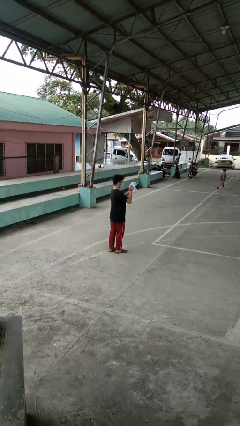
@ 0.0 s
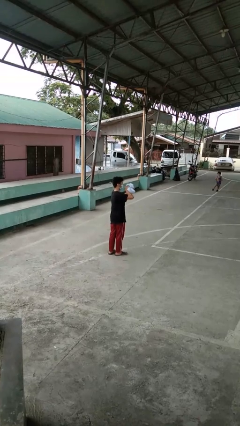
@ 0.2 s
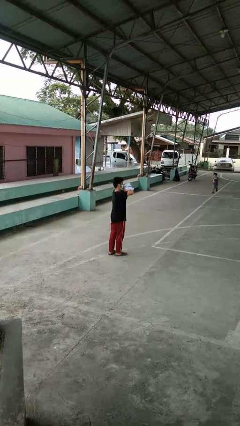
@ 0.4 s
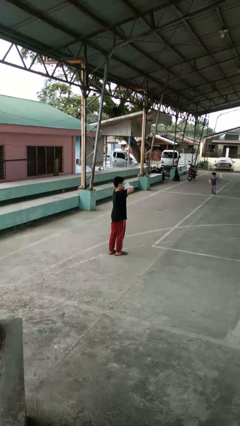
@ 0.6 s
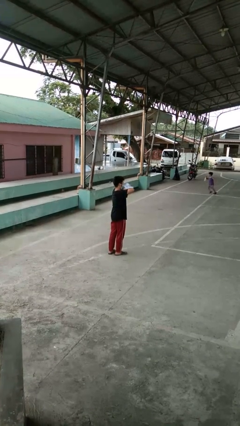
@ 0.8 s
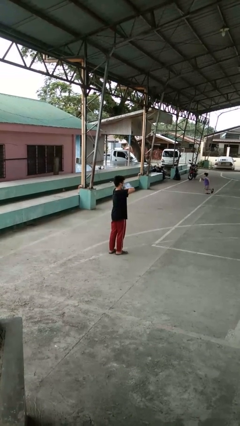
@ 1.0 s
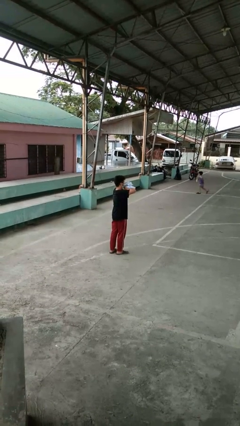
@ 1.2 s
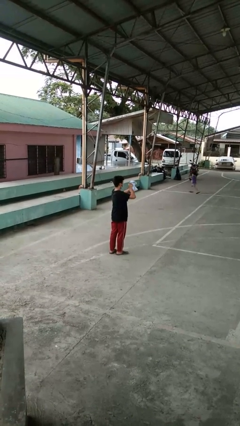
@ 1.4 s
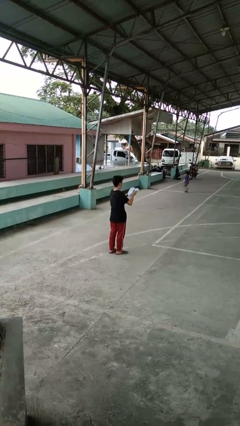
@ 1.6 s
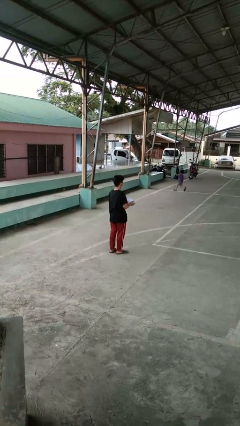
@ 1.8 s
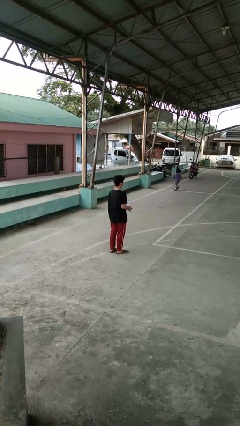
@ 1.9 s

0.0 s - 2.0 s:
person squeezes object

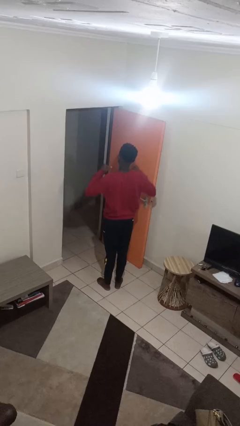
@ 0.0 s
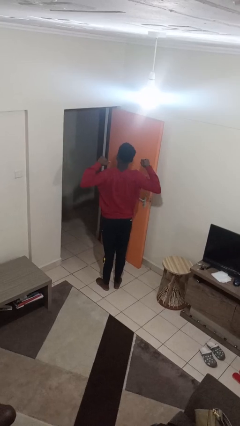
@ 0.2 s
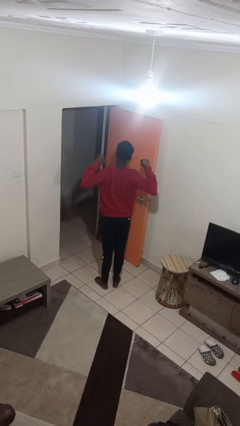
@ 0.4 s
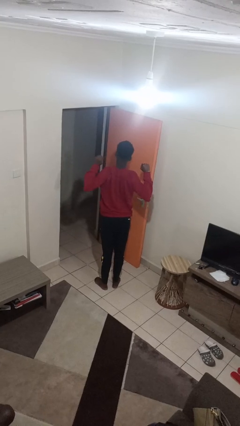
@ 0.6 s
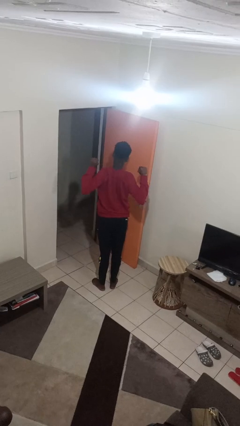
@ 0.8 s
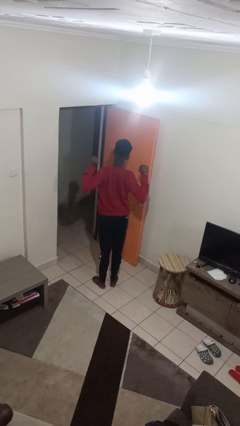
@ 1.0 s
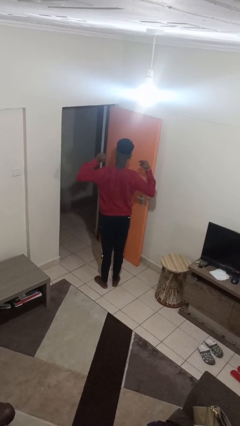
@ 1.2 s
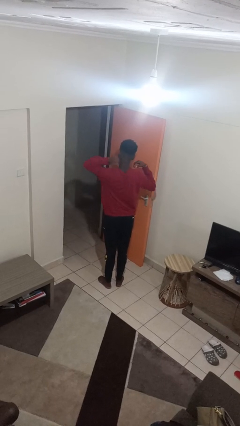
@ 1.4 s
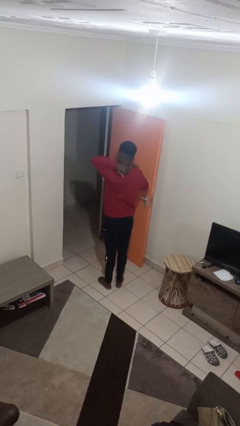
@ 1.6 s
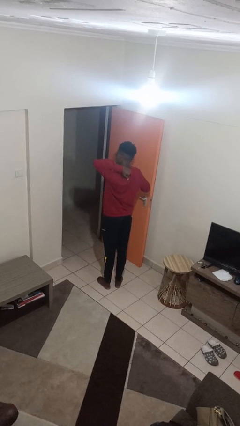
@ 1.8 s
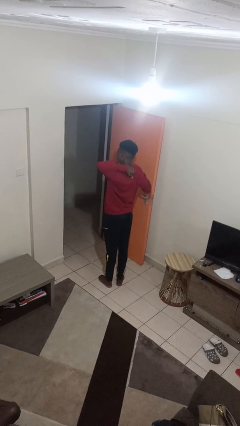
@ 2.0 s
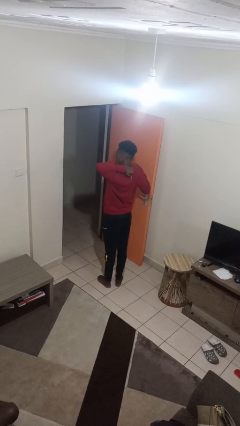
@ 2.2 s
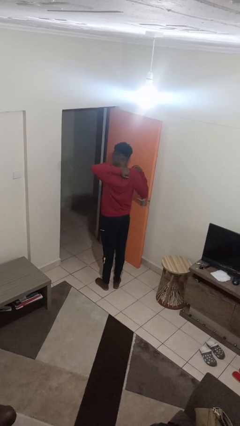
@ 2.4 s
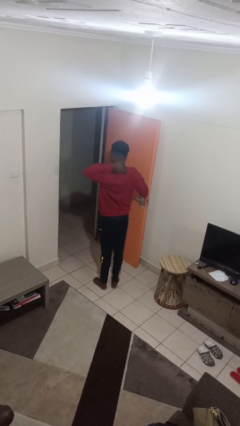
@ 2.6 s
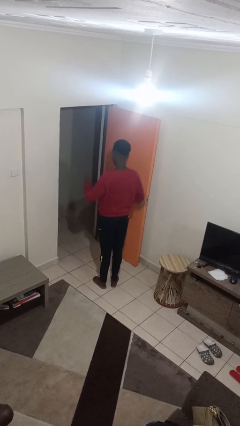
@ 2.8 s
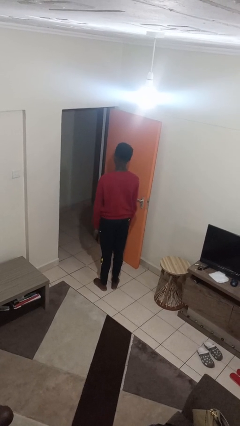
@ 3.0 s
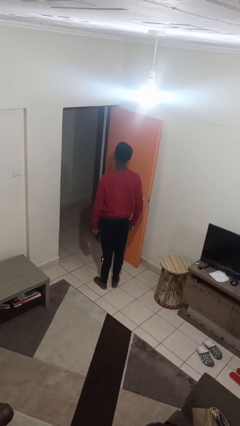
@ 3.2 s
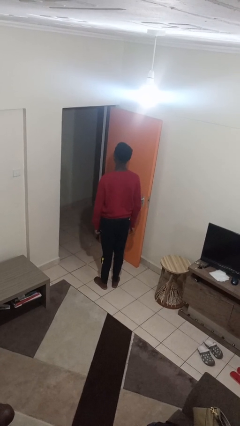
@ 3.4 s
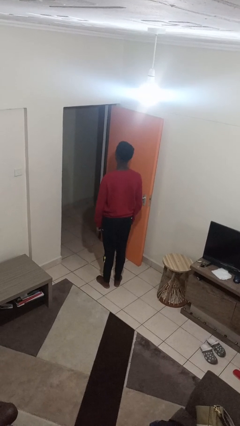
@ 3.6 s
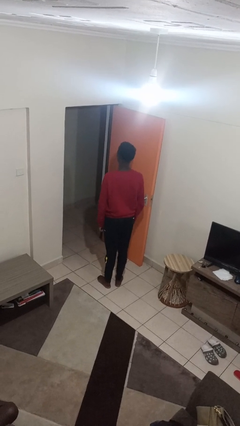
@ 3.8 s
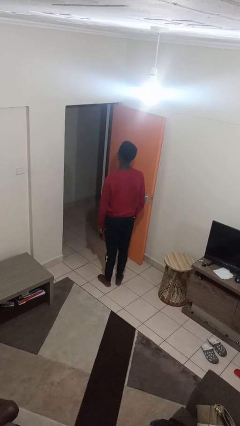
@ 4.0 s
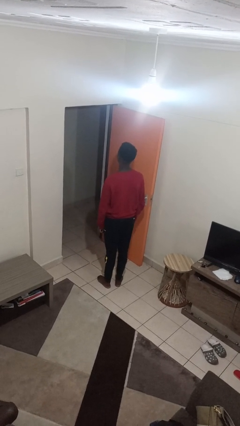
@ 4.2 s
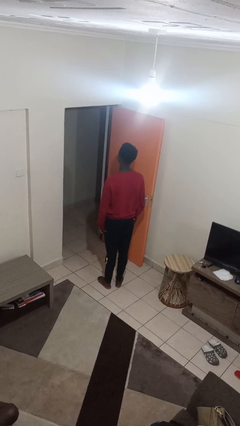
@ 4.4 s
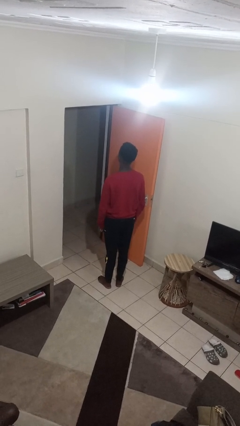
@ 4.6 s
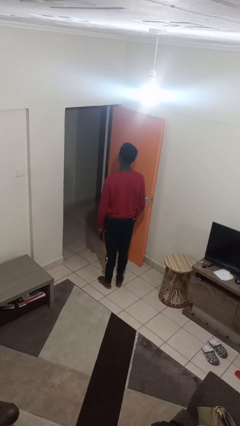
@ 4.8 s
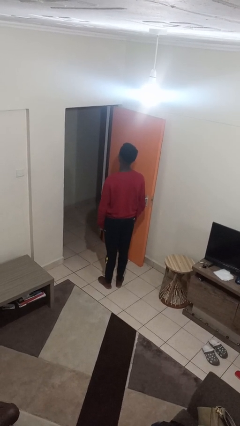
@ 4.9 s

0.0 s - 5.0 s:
person stretches arms to side

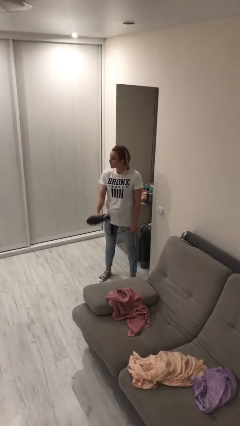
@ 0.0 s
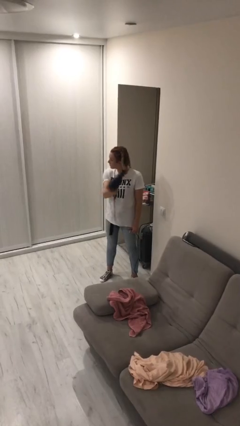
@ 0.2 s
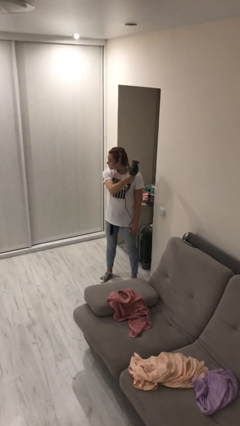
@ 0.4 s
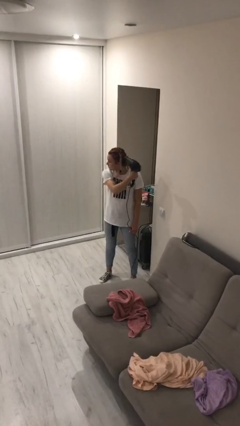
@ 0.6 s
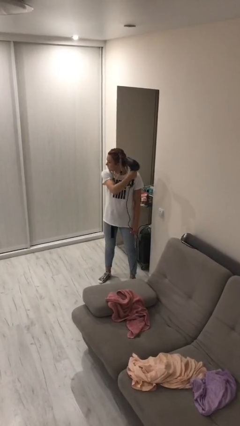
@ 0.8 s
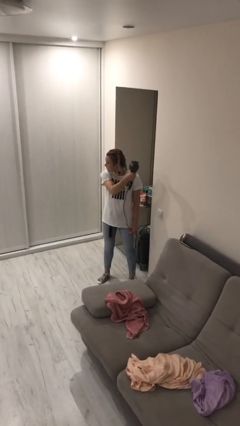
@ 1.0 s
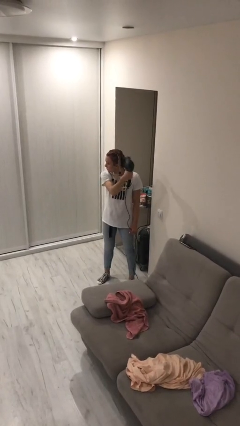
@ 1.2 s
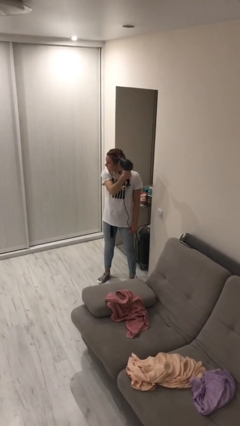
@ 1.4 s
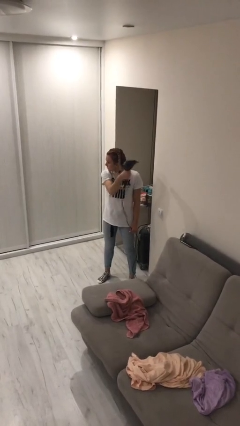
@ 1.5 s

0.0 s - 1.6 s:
person dries hair with hairdryer

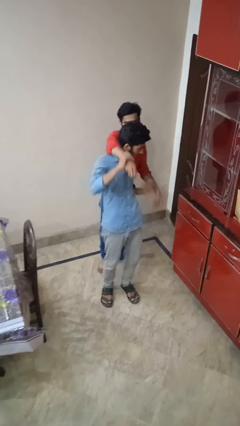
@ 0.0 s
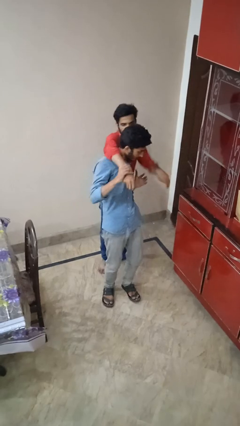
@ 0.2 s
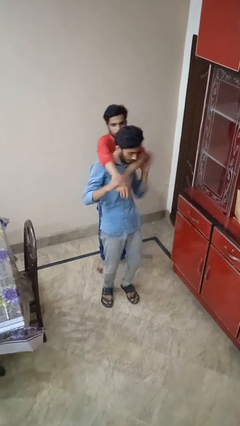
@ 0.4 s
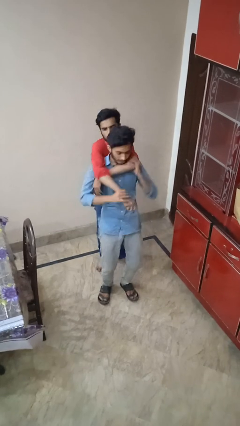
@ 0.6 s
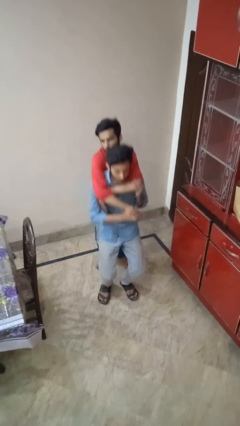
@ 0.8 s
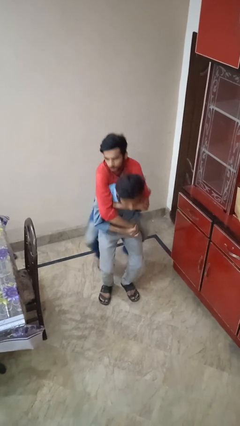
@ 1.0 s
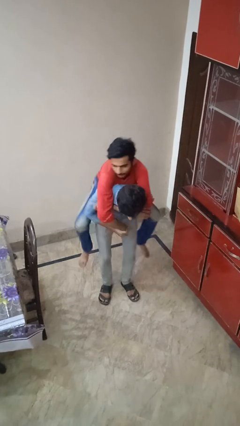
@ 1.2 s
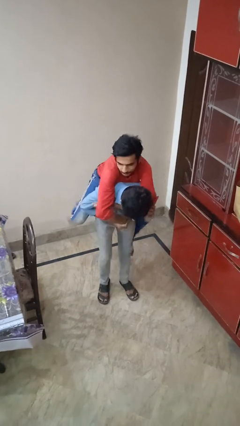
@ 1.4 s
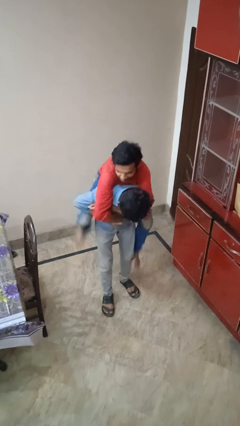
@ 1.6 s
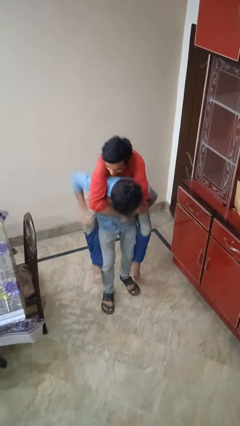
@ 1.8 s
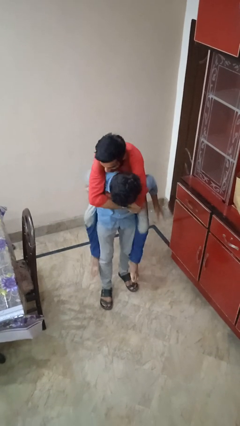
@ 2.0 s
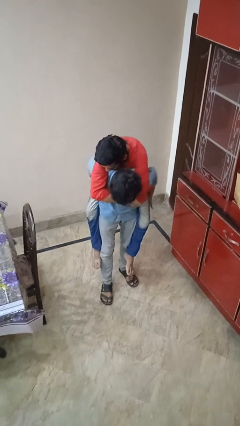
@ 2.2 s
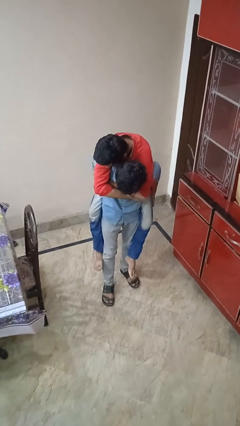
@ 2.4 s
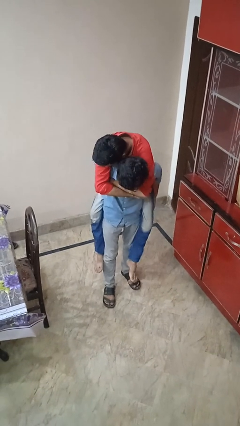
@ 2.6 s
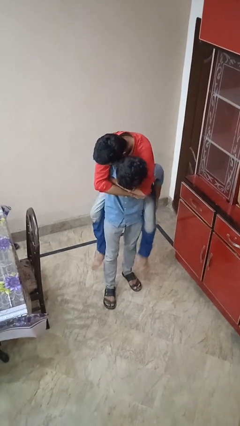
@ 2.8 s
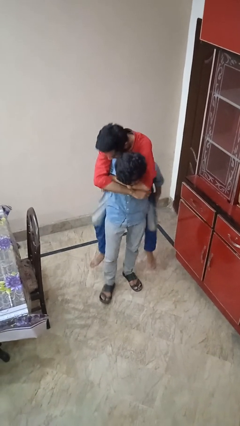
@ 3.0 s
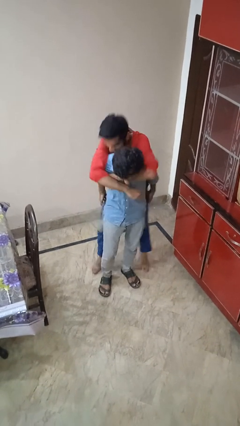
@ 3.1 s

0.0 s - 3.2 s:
person carries person over shoulder

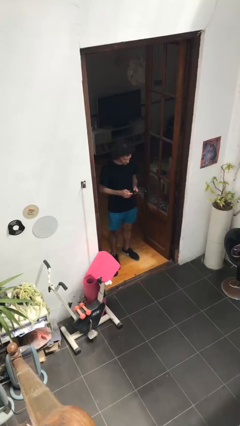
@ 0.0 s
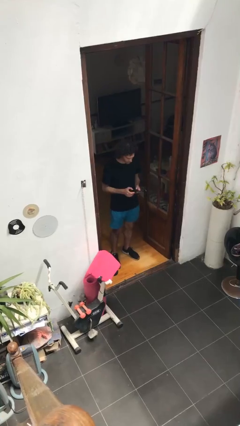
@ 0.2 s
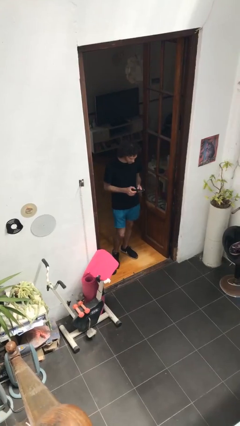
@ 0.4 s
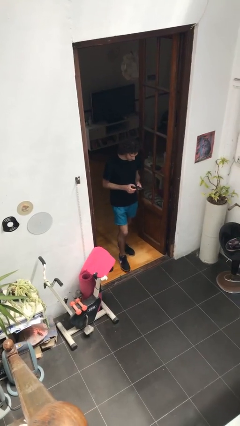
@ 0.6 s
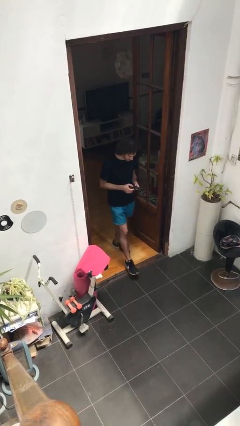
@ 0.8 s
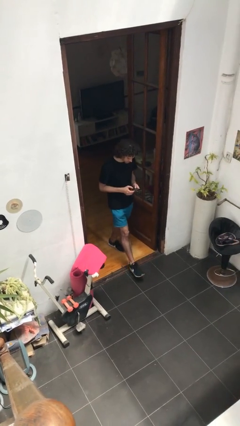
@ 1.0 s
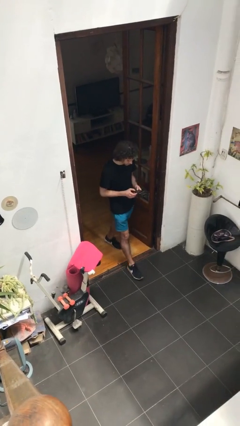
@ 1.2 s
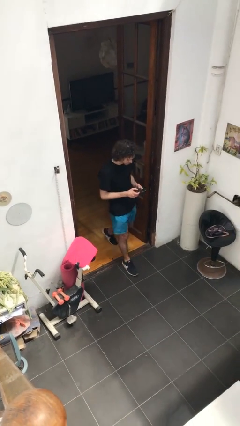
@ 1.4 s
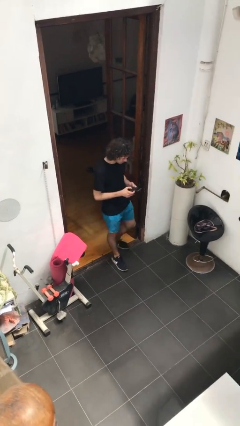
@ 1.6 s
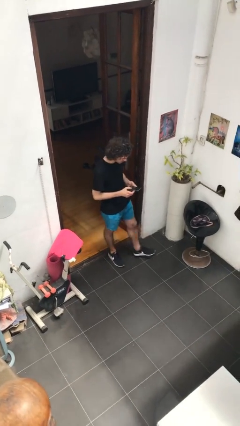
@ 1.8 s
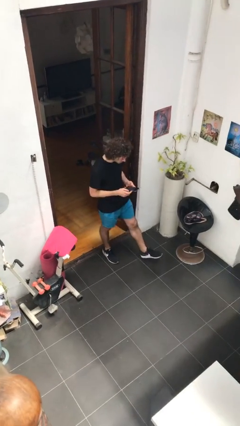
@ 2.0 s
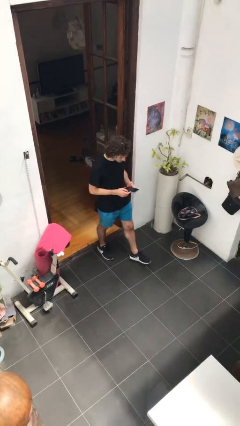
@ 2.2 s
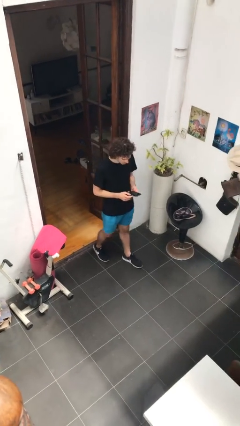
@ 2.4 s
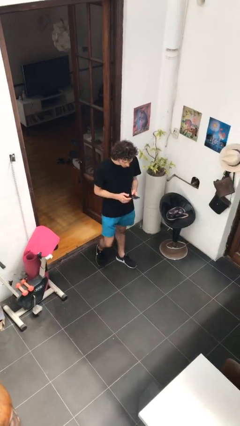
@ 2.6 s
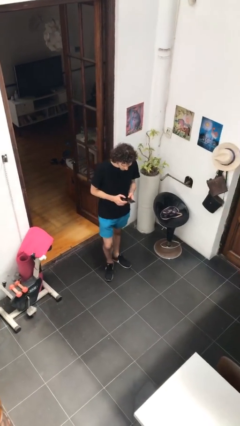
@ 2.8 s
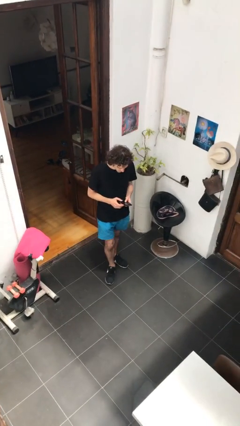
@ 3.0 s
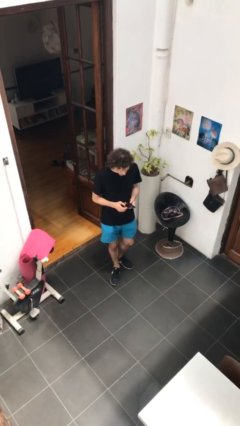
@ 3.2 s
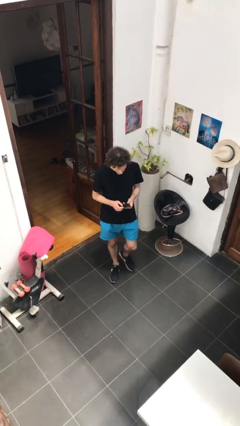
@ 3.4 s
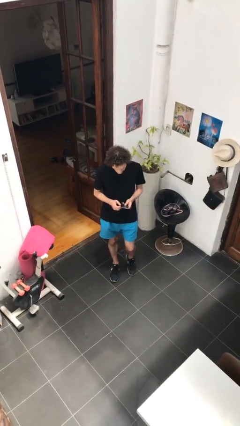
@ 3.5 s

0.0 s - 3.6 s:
person enters scene through structure

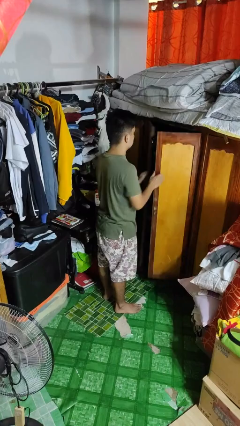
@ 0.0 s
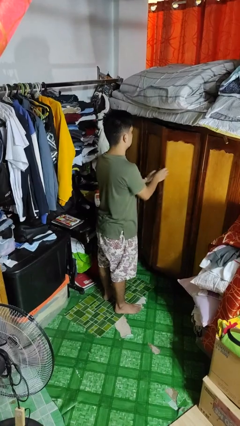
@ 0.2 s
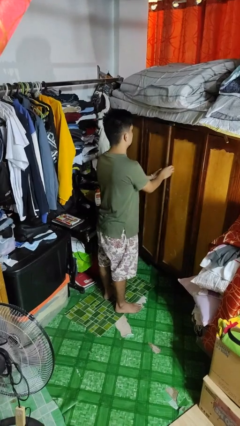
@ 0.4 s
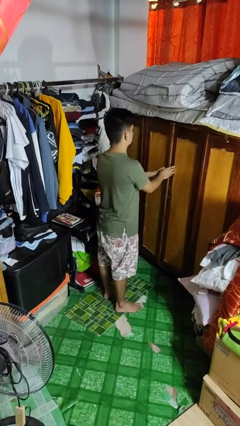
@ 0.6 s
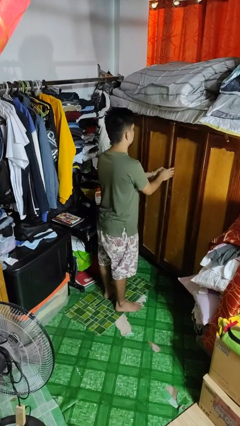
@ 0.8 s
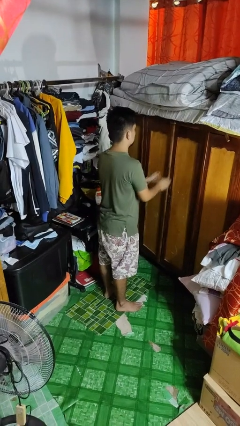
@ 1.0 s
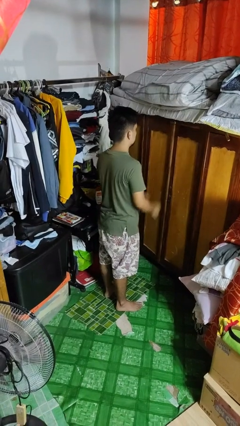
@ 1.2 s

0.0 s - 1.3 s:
person closes closet door

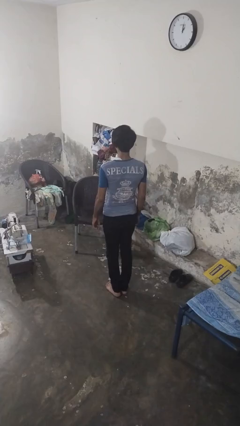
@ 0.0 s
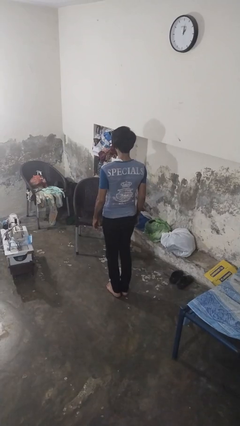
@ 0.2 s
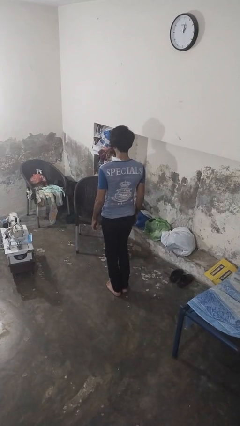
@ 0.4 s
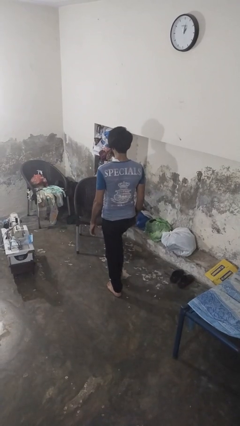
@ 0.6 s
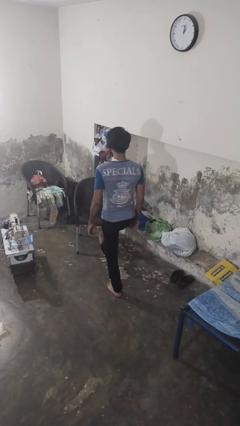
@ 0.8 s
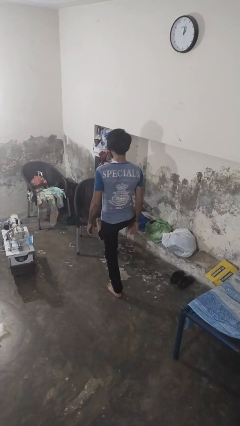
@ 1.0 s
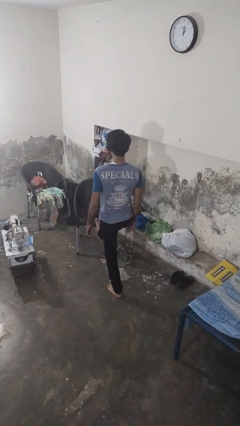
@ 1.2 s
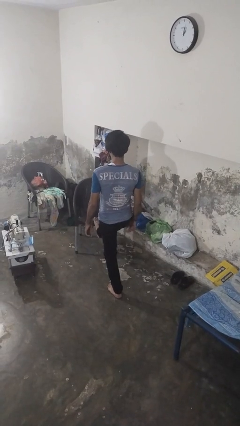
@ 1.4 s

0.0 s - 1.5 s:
person stubs toe
